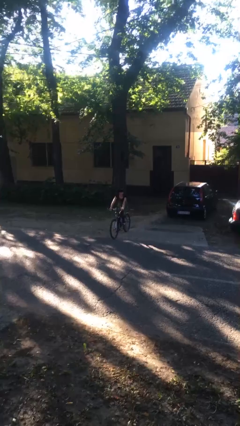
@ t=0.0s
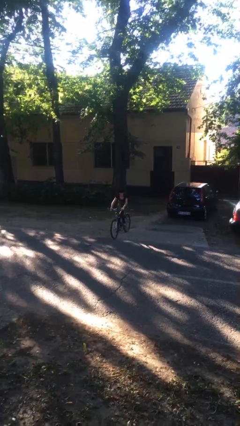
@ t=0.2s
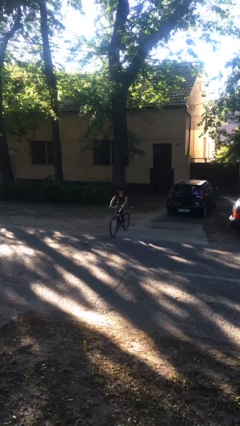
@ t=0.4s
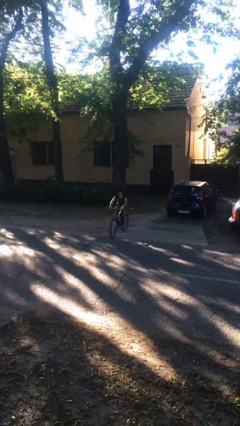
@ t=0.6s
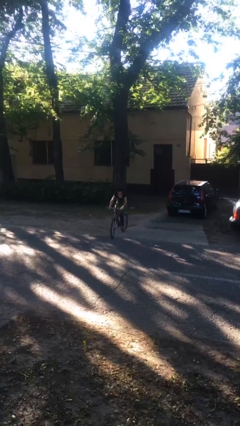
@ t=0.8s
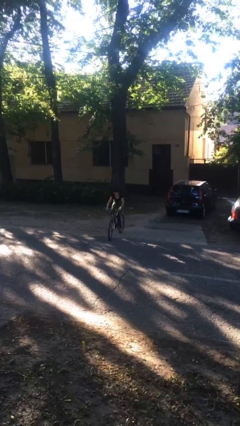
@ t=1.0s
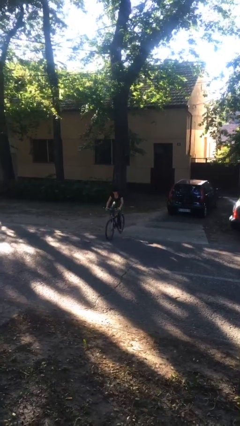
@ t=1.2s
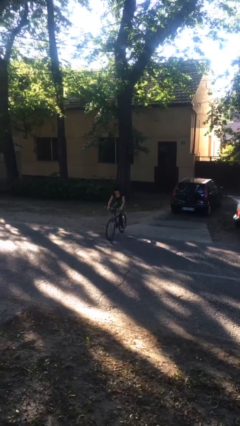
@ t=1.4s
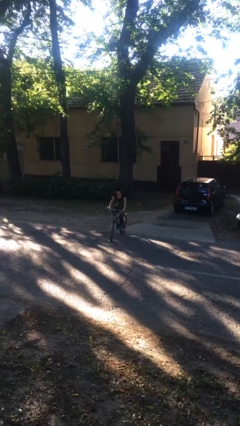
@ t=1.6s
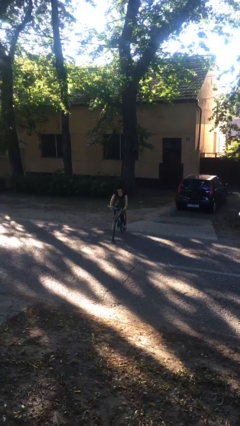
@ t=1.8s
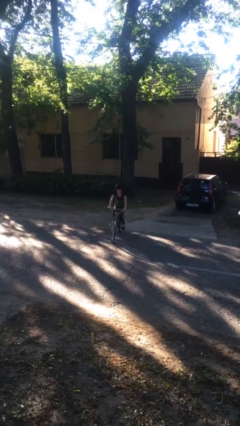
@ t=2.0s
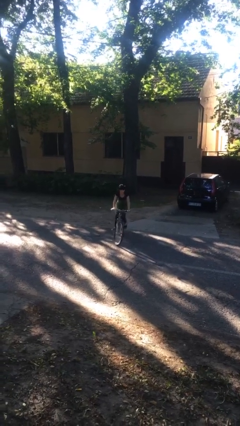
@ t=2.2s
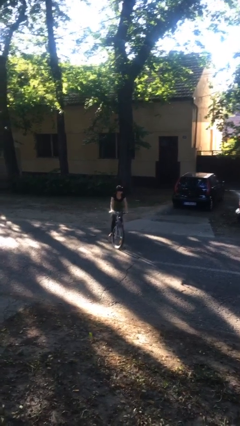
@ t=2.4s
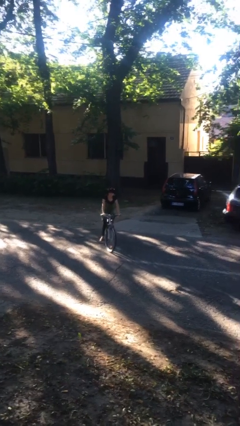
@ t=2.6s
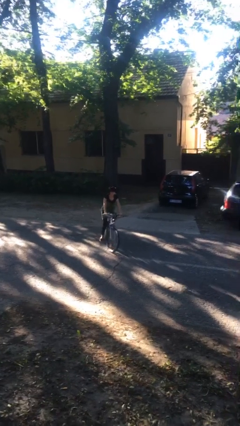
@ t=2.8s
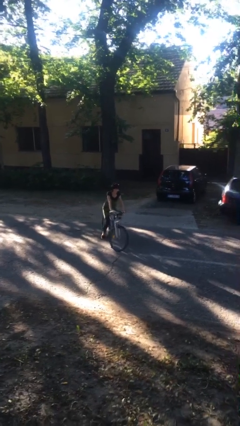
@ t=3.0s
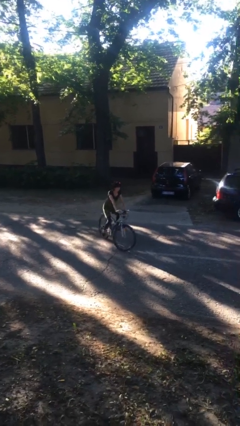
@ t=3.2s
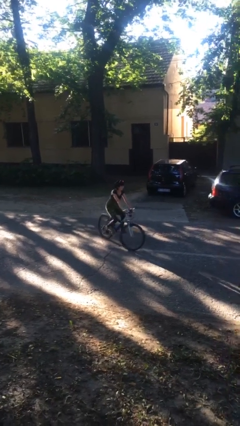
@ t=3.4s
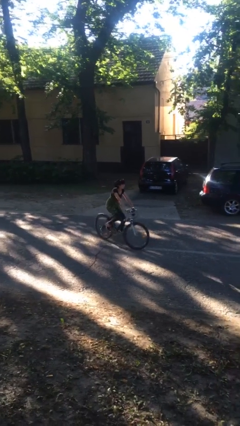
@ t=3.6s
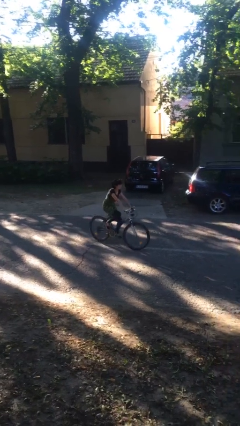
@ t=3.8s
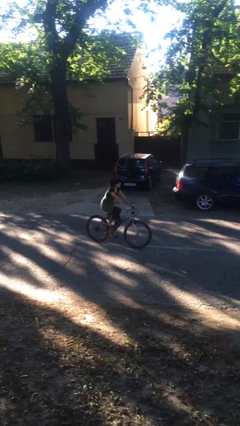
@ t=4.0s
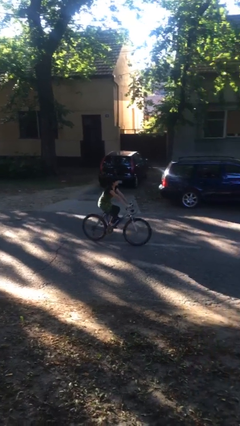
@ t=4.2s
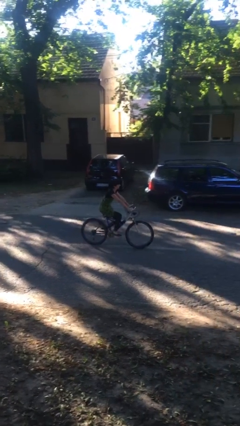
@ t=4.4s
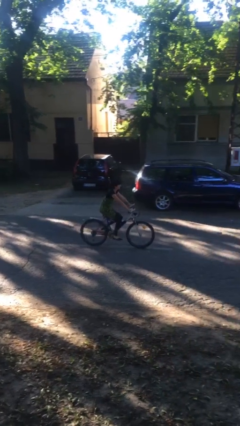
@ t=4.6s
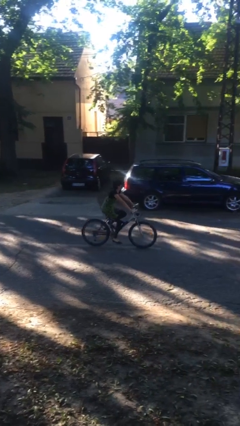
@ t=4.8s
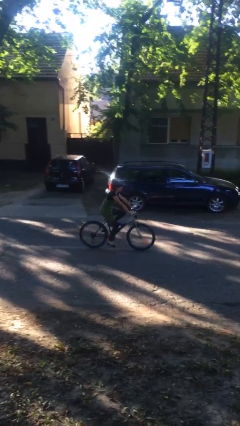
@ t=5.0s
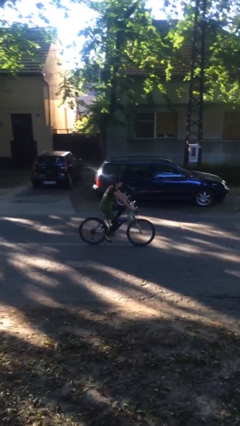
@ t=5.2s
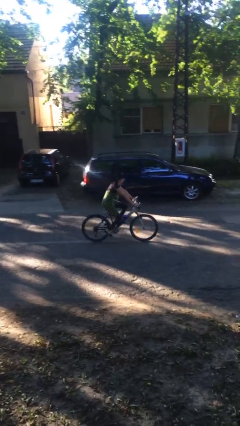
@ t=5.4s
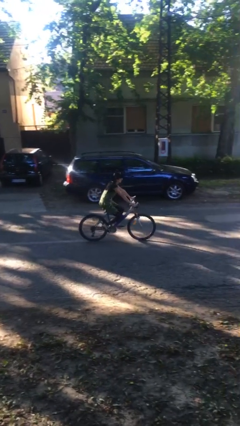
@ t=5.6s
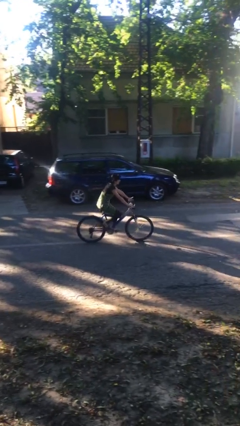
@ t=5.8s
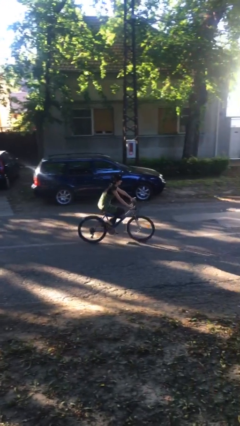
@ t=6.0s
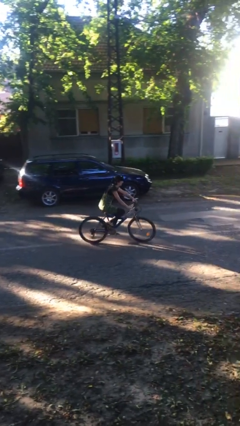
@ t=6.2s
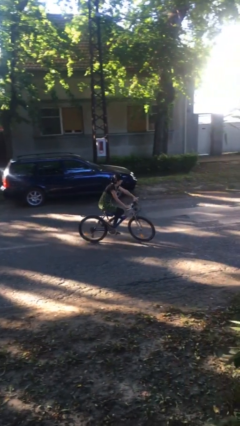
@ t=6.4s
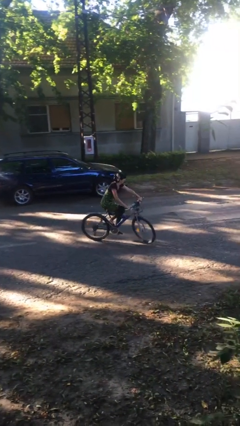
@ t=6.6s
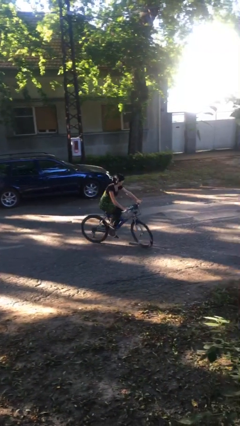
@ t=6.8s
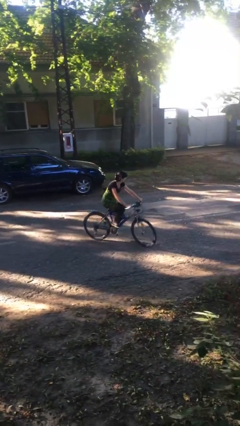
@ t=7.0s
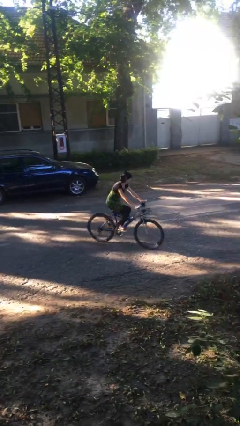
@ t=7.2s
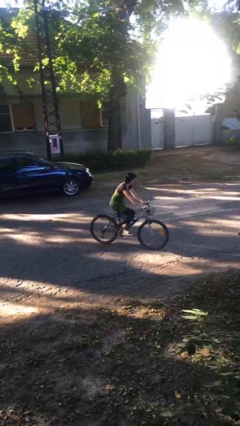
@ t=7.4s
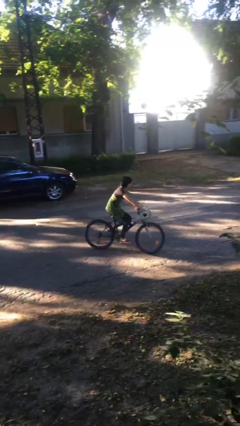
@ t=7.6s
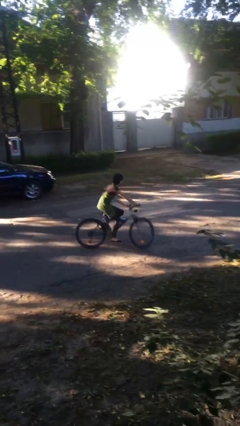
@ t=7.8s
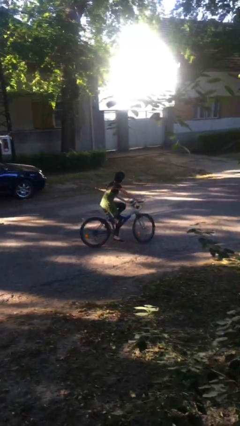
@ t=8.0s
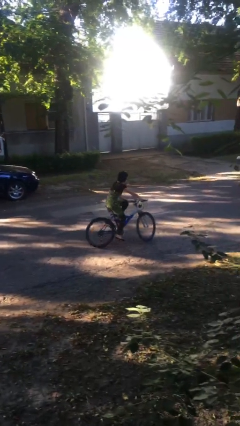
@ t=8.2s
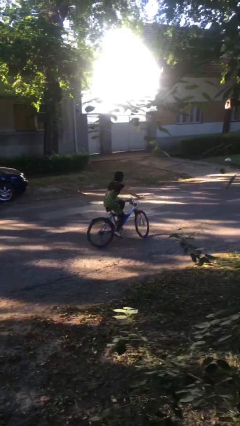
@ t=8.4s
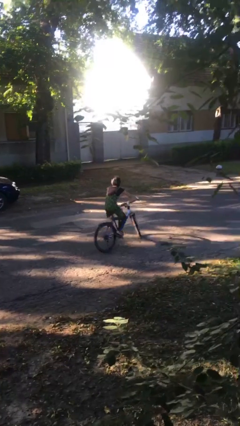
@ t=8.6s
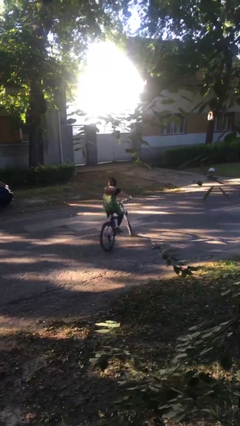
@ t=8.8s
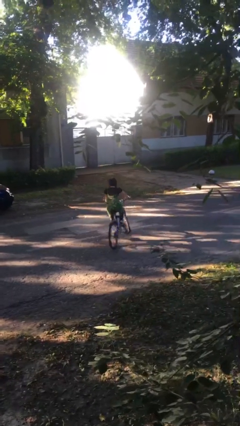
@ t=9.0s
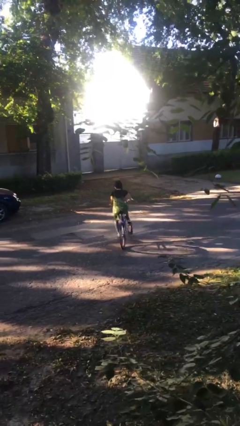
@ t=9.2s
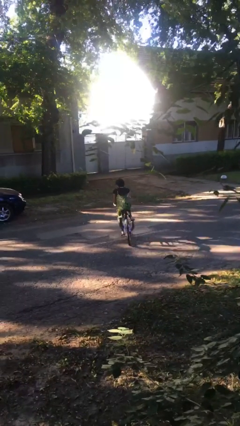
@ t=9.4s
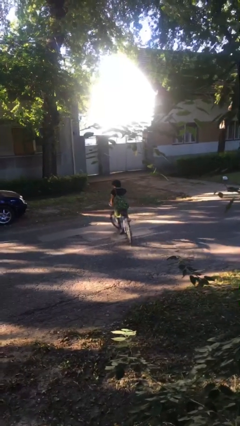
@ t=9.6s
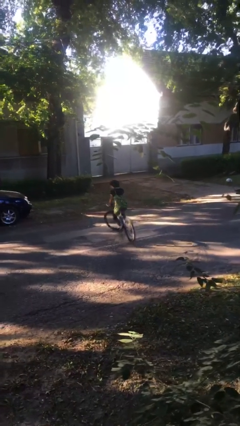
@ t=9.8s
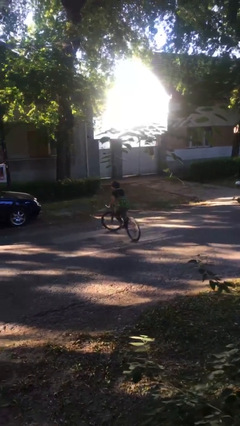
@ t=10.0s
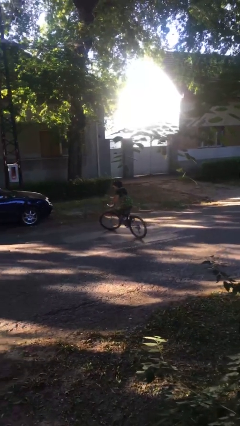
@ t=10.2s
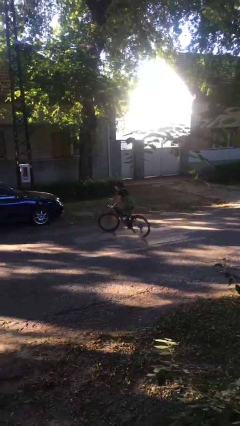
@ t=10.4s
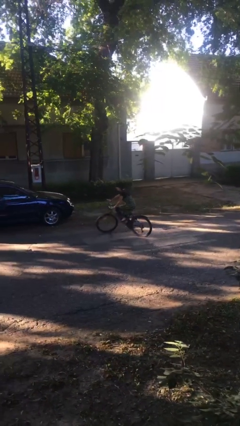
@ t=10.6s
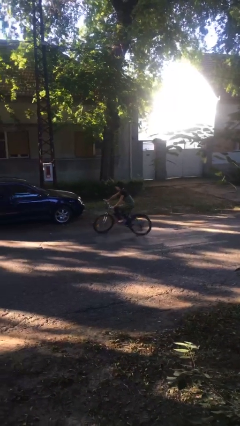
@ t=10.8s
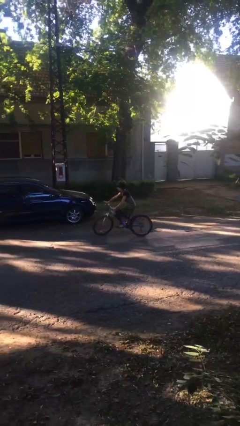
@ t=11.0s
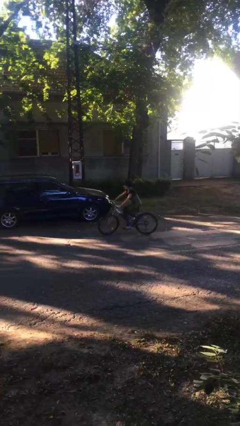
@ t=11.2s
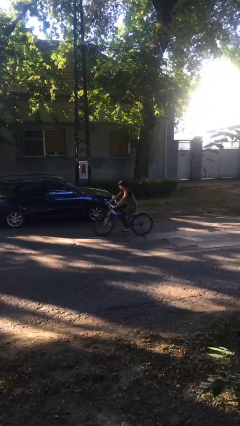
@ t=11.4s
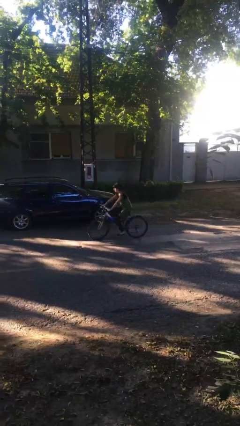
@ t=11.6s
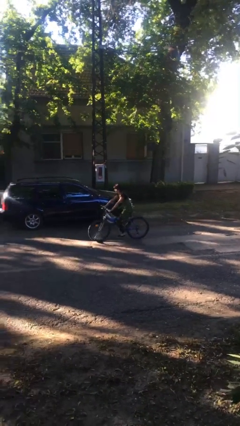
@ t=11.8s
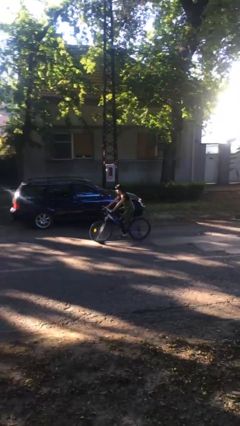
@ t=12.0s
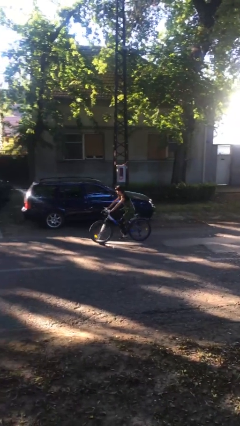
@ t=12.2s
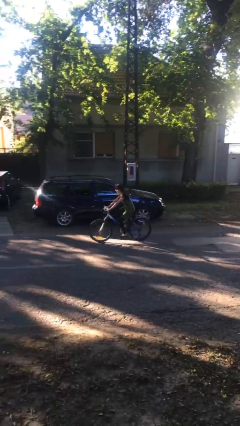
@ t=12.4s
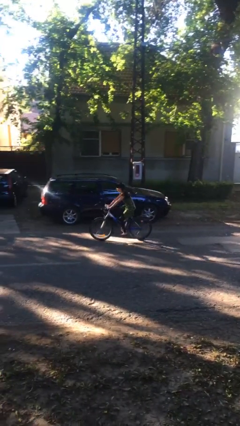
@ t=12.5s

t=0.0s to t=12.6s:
person rides bicycle

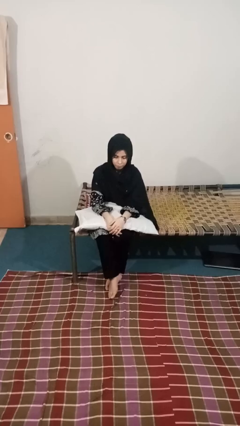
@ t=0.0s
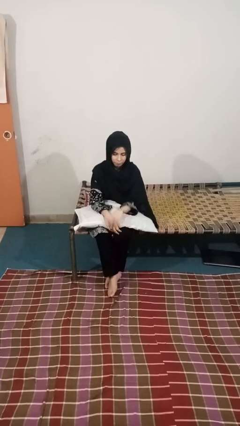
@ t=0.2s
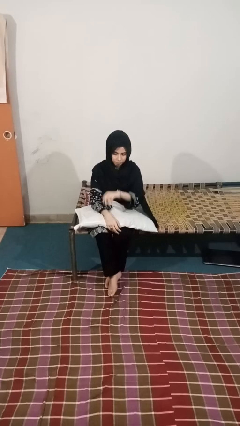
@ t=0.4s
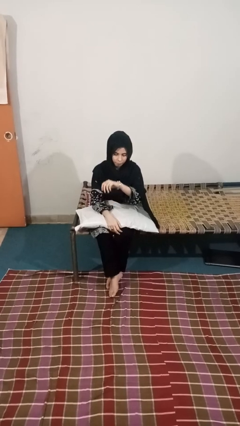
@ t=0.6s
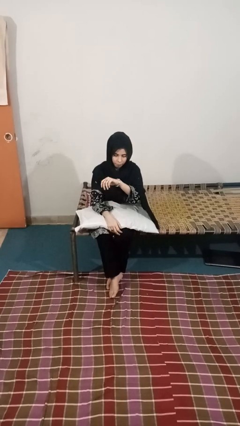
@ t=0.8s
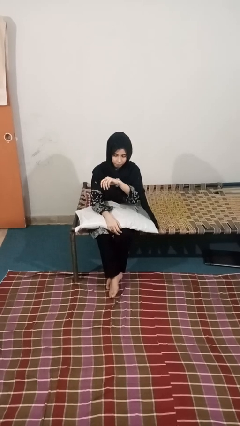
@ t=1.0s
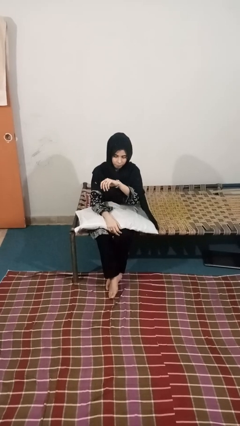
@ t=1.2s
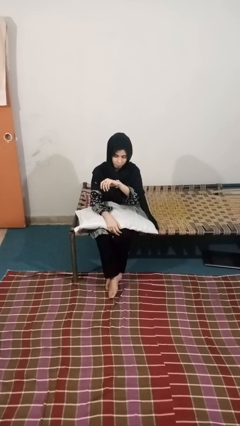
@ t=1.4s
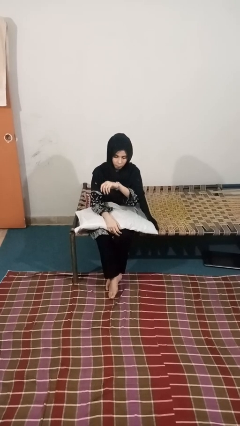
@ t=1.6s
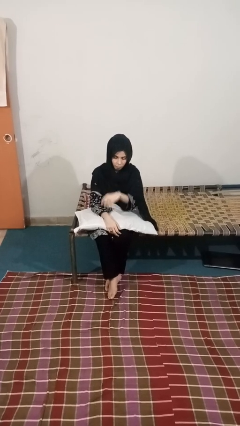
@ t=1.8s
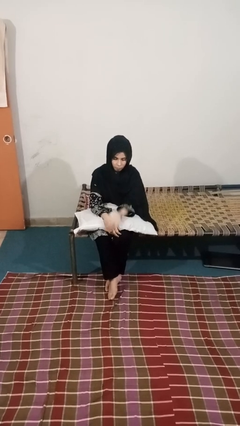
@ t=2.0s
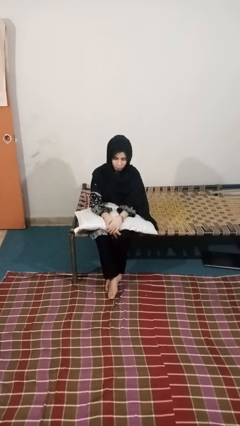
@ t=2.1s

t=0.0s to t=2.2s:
person looks at wristwatch

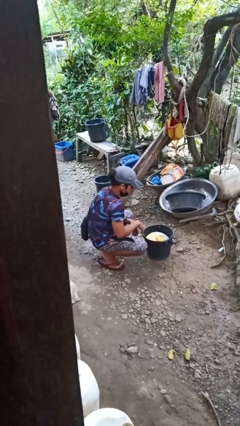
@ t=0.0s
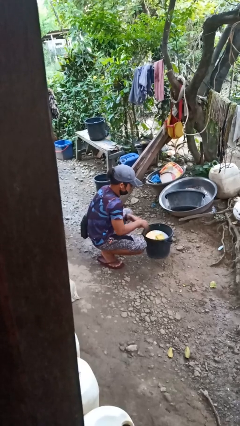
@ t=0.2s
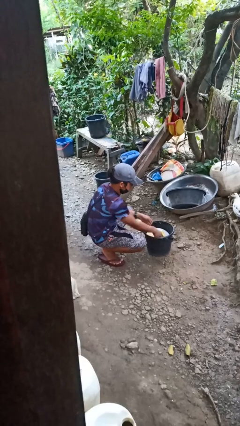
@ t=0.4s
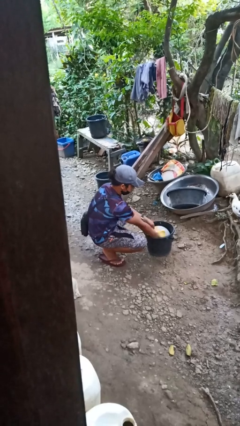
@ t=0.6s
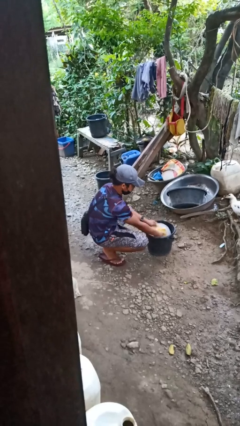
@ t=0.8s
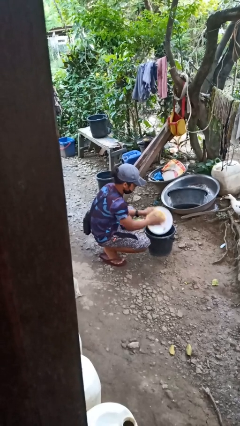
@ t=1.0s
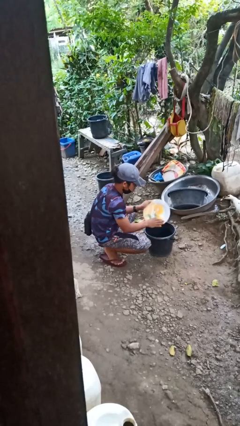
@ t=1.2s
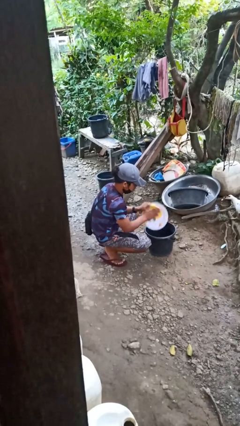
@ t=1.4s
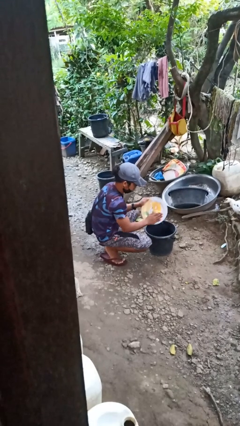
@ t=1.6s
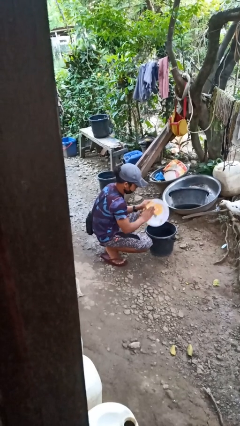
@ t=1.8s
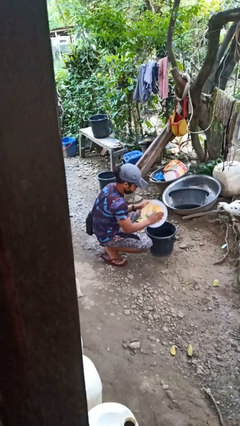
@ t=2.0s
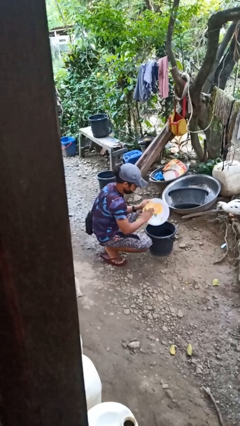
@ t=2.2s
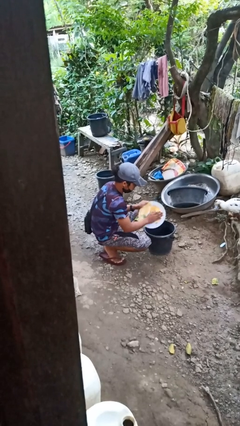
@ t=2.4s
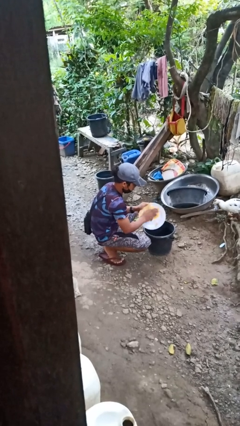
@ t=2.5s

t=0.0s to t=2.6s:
person washes dish
